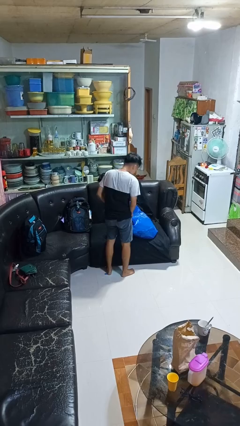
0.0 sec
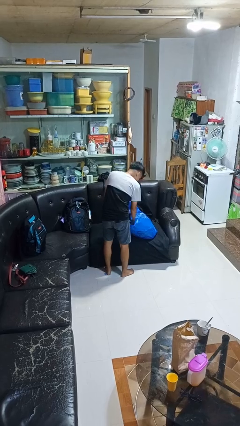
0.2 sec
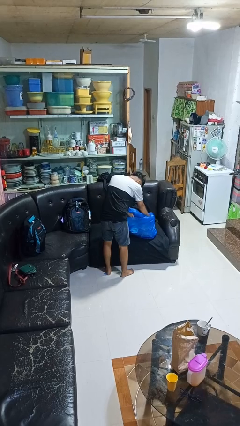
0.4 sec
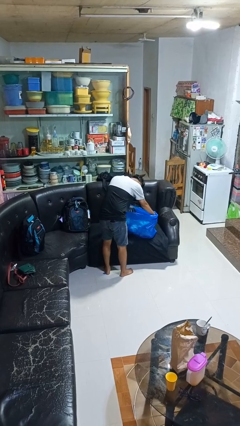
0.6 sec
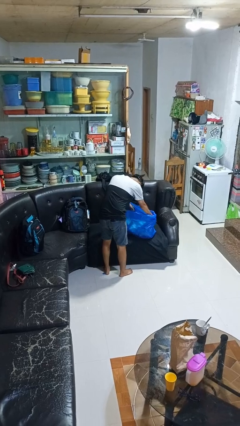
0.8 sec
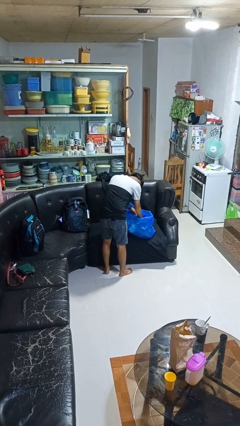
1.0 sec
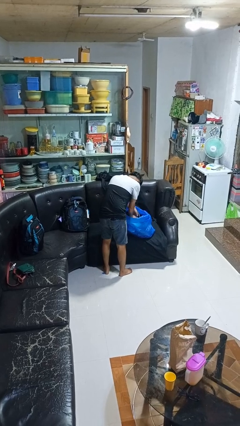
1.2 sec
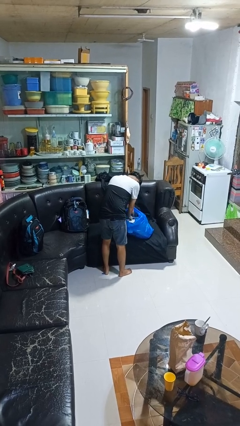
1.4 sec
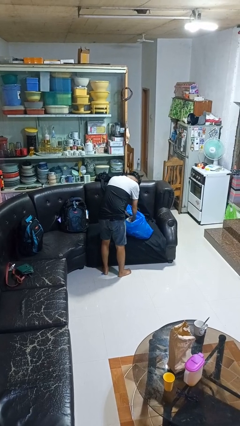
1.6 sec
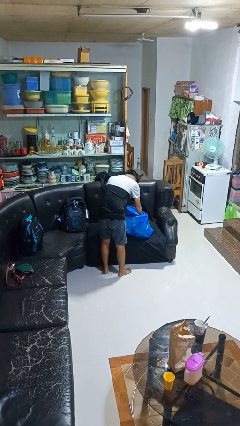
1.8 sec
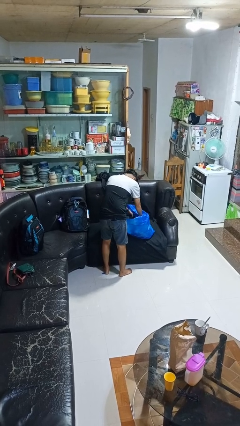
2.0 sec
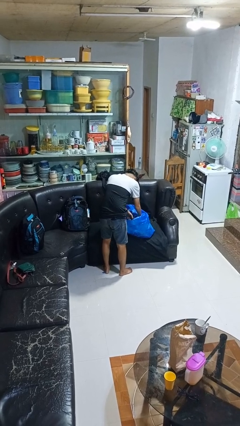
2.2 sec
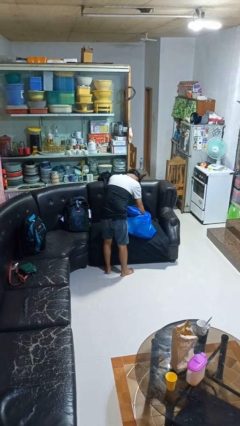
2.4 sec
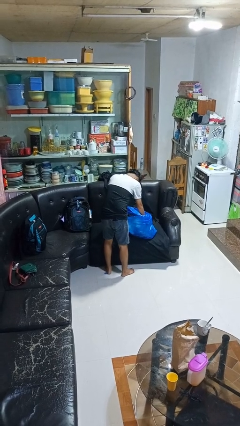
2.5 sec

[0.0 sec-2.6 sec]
person searches in bag

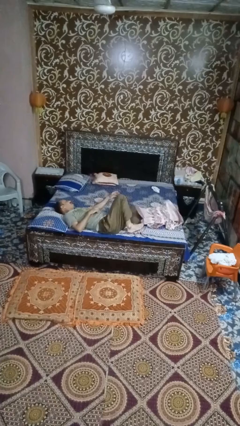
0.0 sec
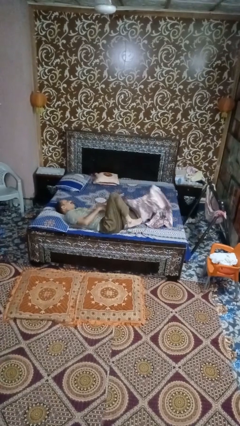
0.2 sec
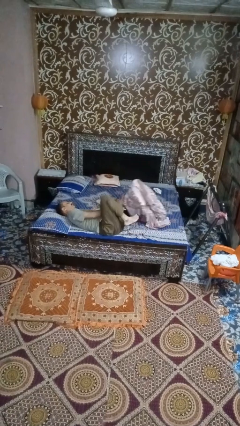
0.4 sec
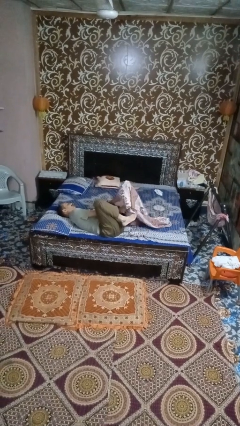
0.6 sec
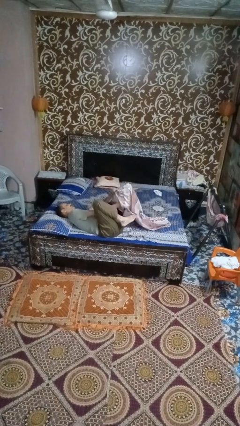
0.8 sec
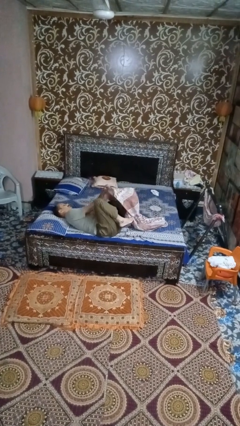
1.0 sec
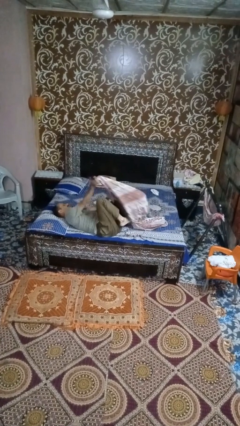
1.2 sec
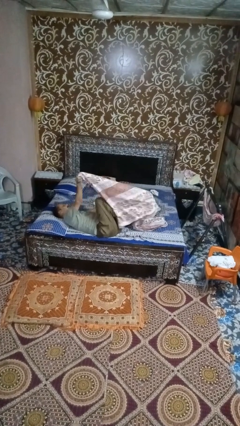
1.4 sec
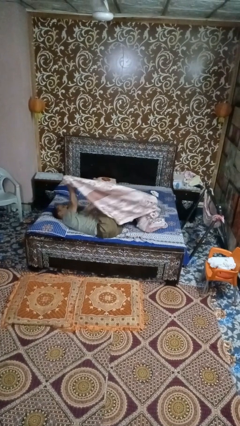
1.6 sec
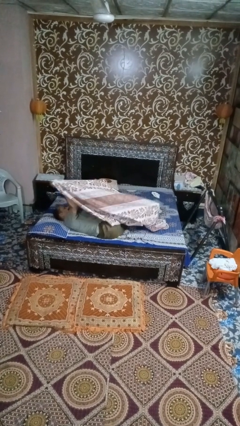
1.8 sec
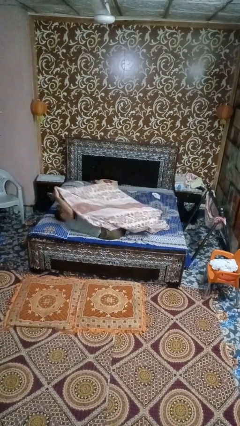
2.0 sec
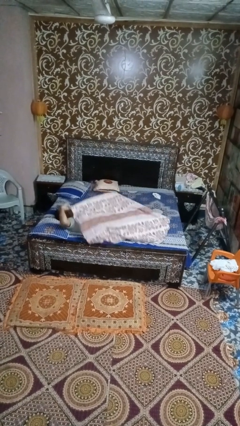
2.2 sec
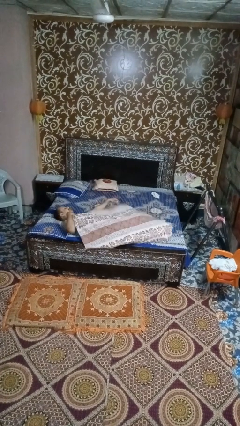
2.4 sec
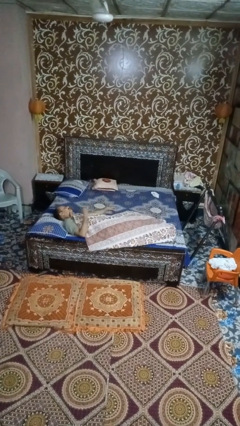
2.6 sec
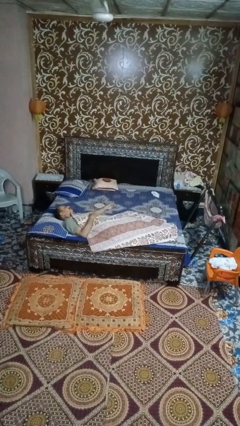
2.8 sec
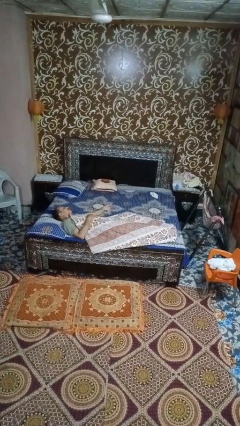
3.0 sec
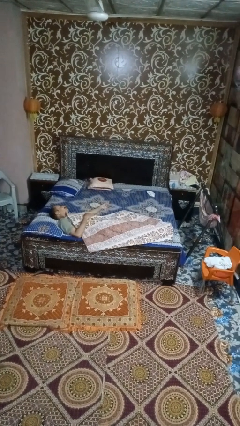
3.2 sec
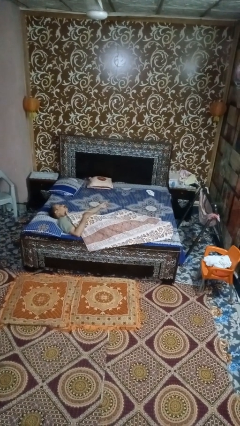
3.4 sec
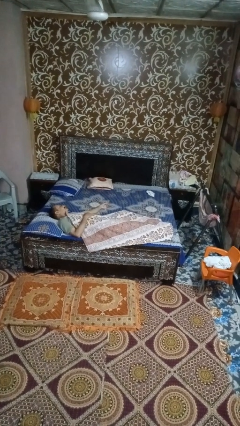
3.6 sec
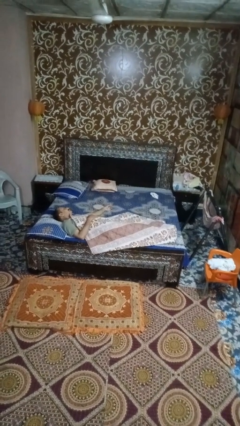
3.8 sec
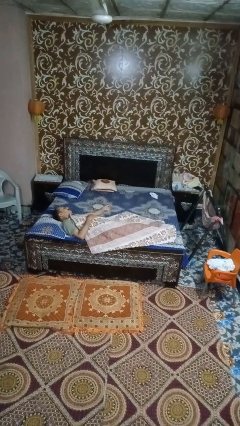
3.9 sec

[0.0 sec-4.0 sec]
person covers with bedsheets

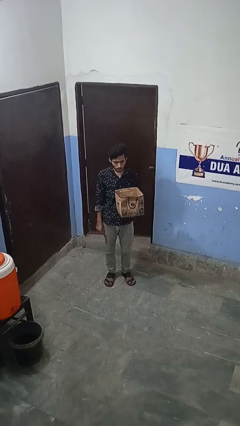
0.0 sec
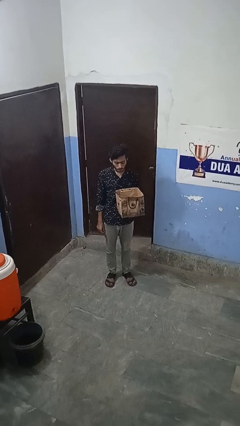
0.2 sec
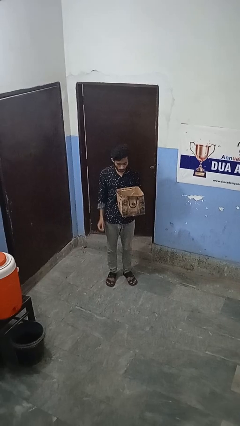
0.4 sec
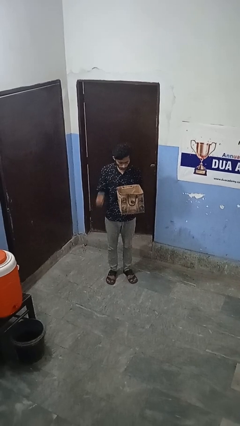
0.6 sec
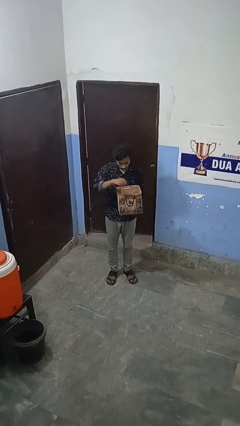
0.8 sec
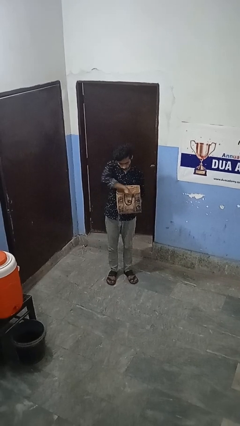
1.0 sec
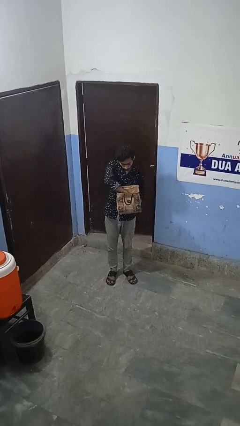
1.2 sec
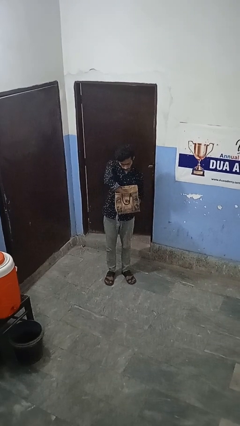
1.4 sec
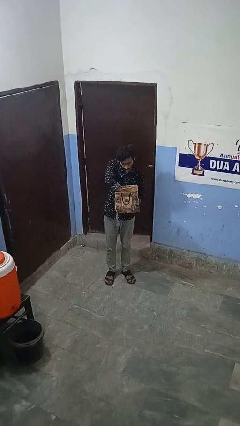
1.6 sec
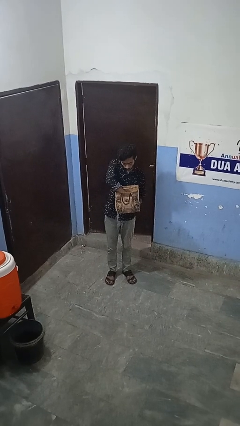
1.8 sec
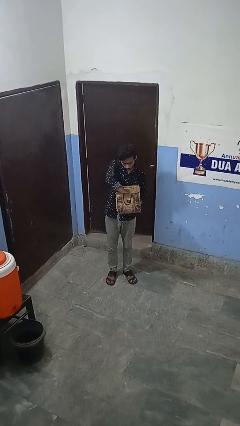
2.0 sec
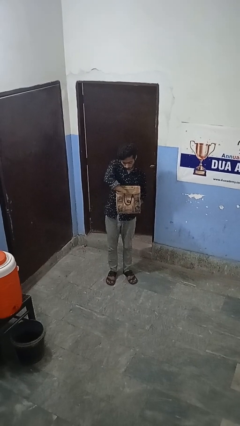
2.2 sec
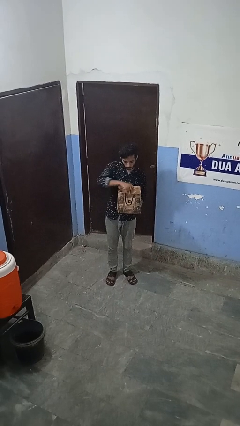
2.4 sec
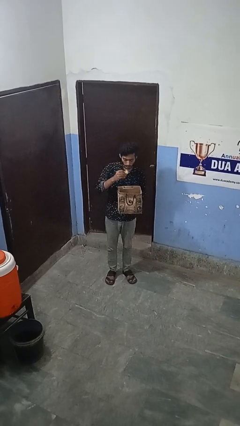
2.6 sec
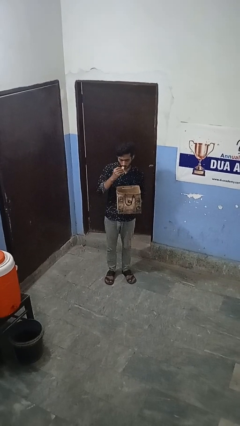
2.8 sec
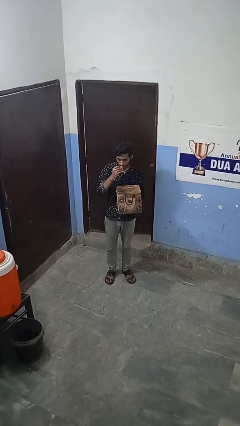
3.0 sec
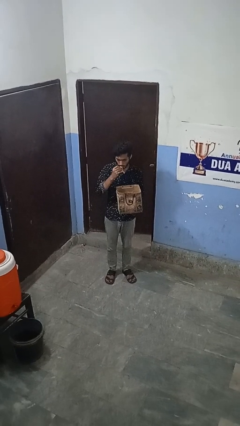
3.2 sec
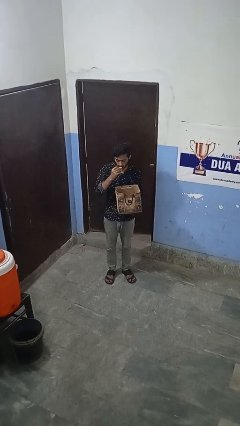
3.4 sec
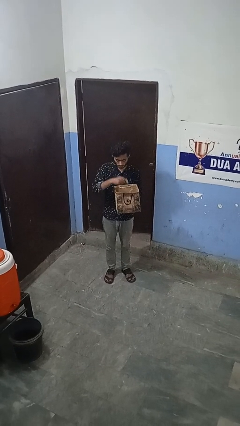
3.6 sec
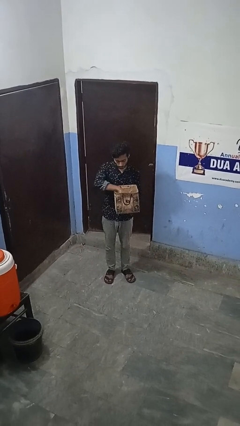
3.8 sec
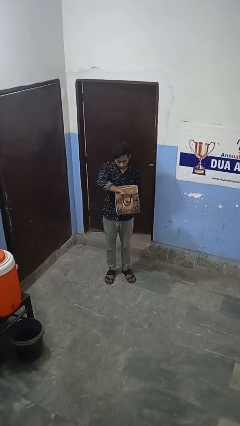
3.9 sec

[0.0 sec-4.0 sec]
person eats snack from bag

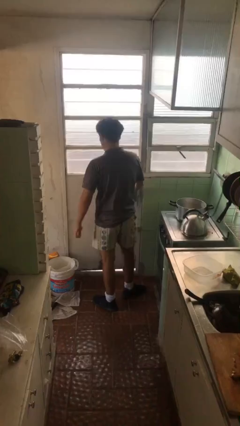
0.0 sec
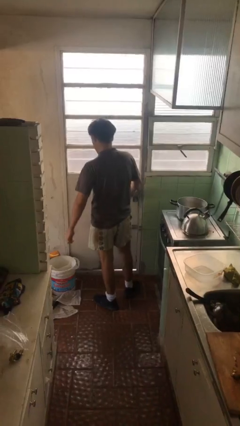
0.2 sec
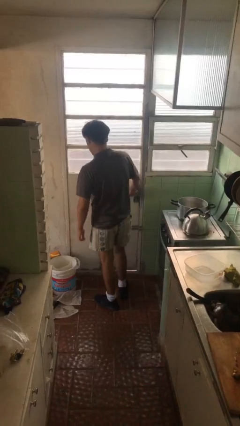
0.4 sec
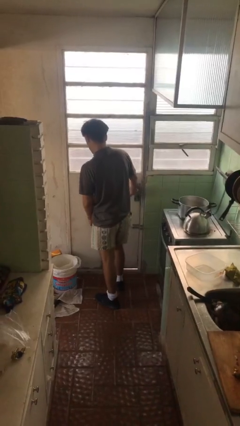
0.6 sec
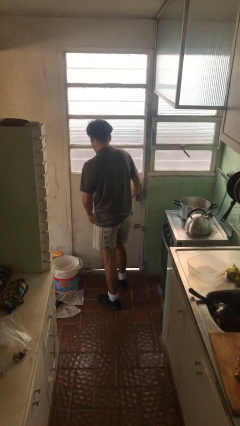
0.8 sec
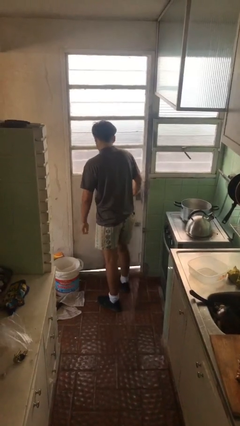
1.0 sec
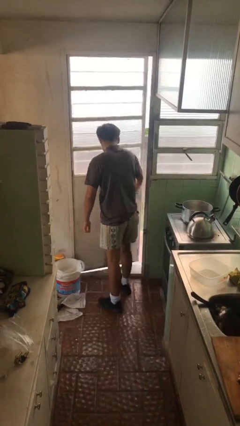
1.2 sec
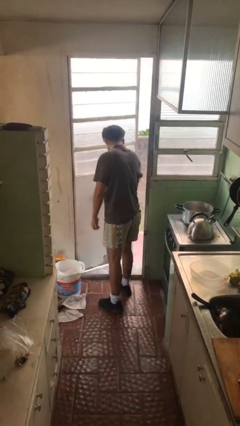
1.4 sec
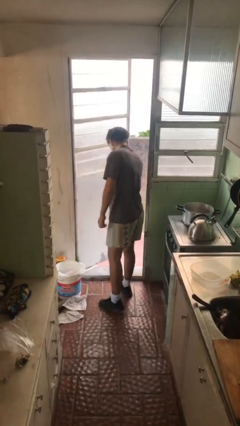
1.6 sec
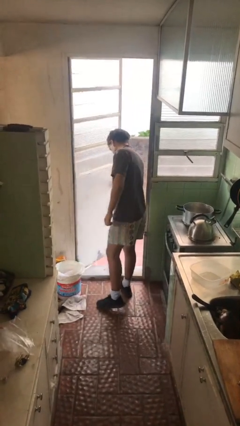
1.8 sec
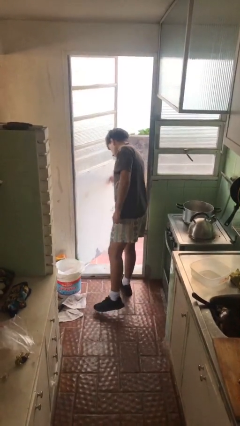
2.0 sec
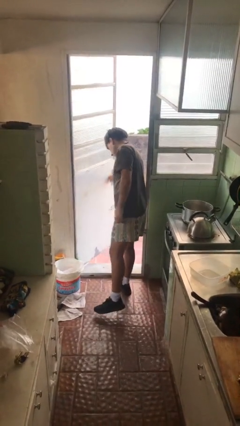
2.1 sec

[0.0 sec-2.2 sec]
person opens facility door

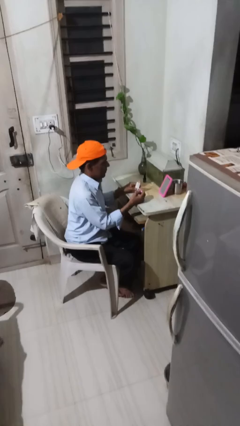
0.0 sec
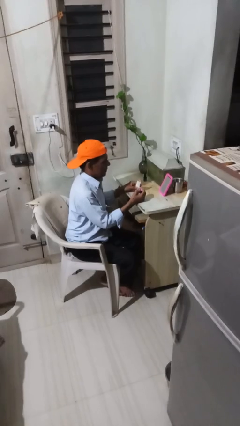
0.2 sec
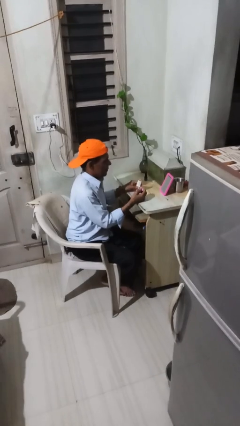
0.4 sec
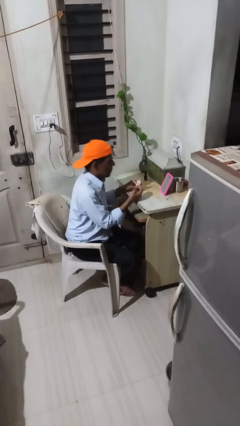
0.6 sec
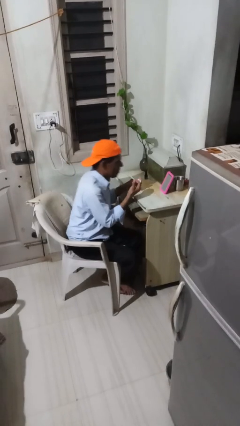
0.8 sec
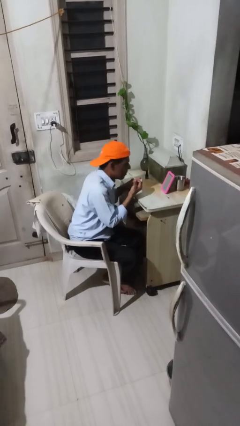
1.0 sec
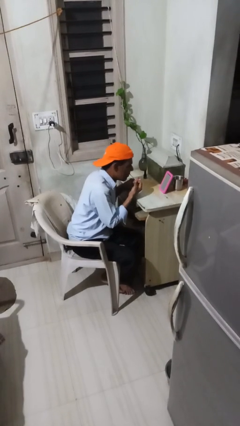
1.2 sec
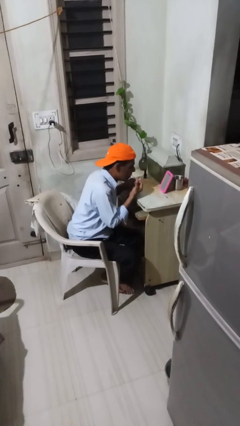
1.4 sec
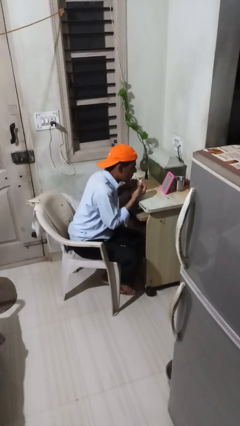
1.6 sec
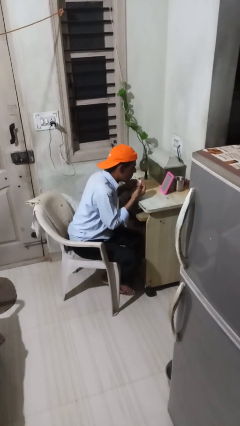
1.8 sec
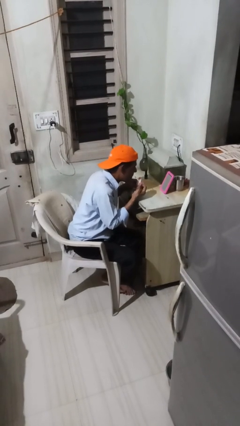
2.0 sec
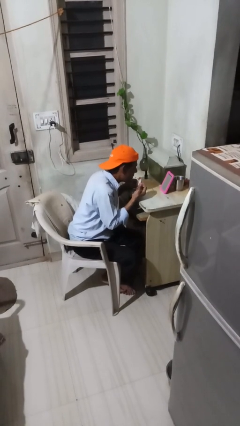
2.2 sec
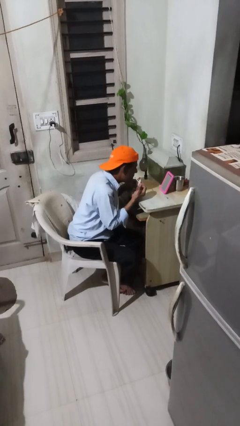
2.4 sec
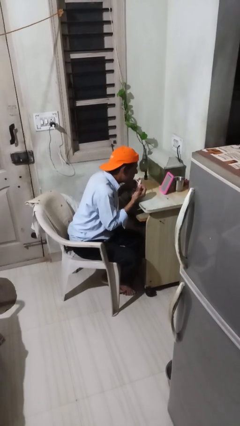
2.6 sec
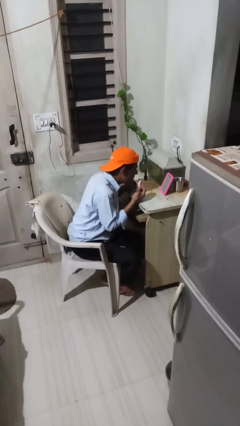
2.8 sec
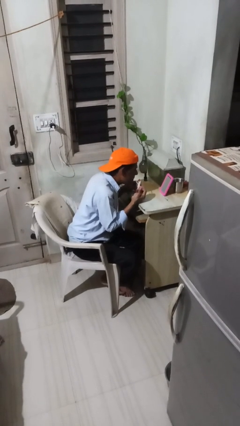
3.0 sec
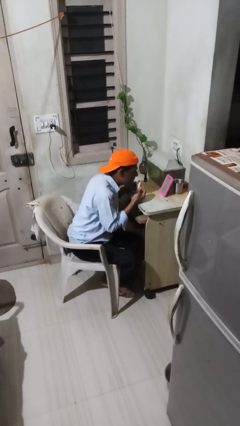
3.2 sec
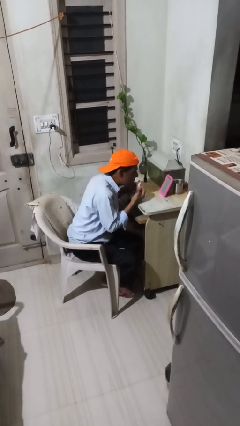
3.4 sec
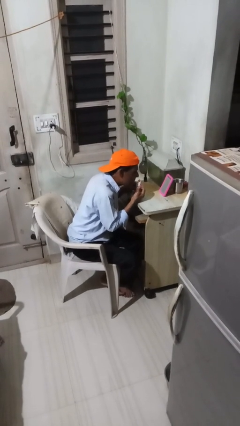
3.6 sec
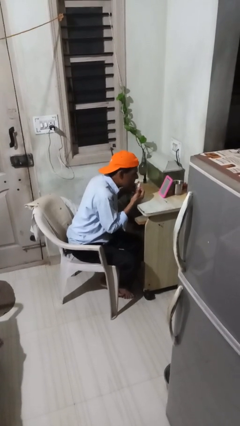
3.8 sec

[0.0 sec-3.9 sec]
person applies lip makeup

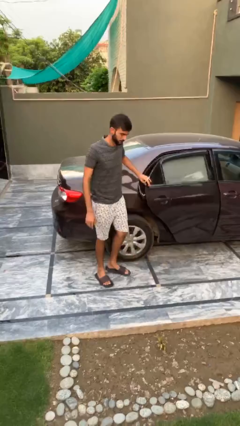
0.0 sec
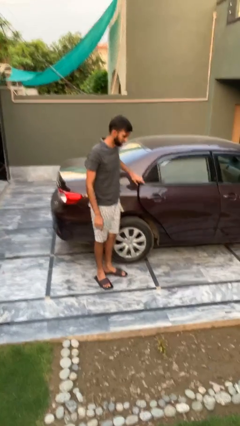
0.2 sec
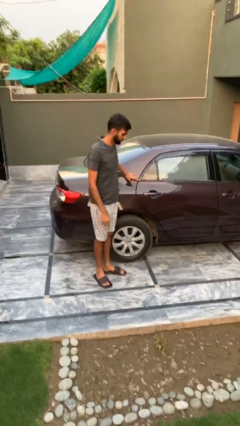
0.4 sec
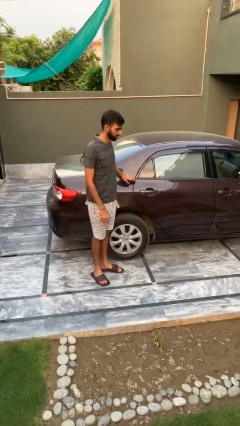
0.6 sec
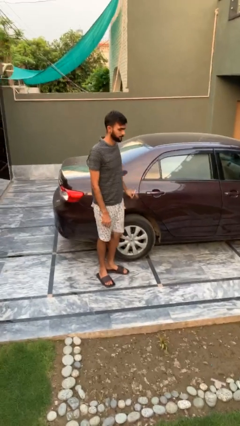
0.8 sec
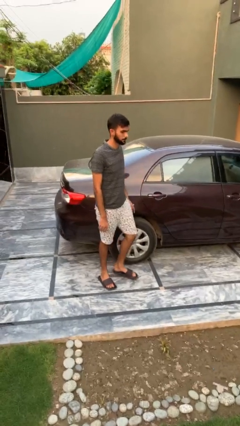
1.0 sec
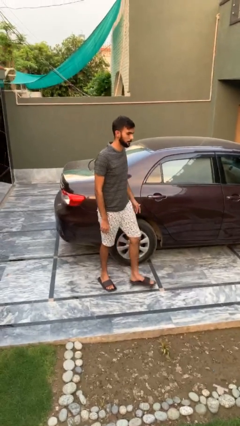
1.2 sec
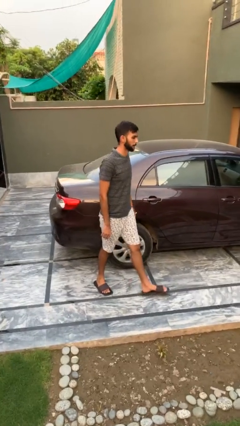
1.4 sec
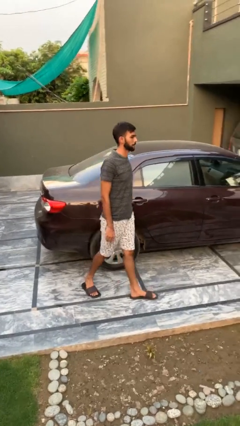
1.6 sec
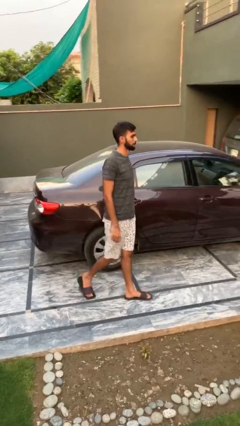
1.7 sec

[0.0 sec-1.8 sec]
person closes car door
